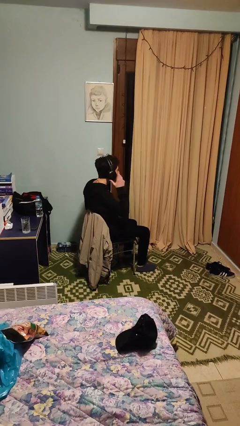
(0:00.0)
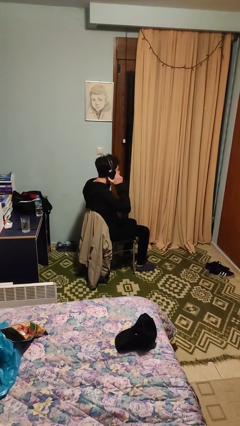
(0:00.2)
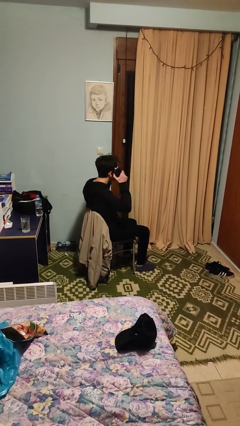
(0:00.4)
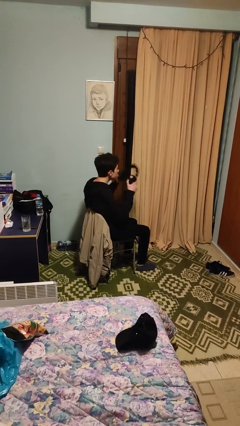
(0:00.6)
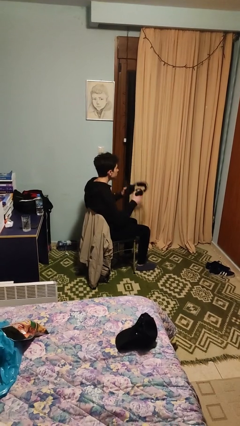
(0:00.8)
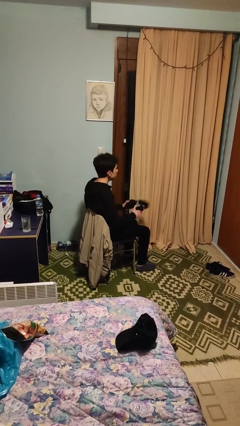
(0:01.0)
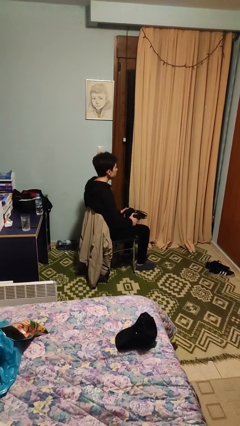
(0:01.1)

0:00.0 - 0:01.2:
person takes off headphones

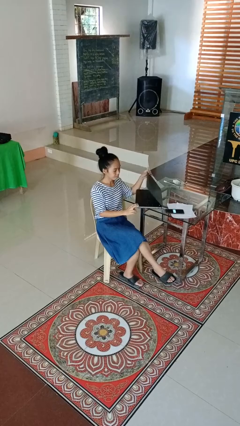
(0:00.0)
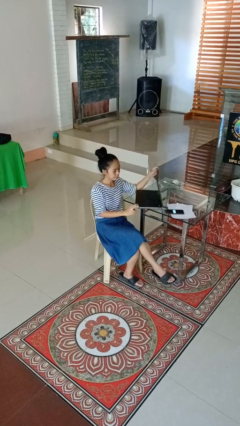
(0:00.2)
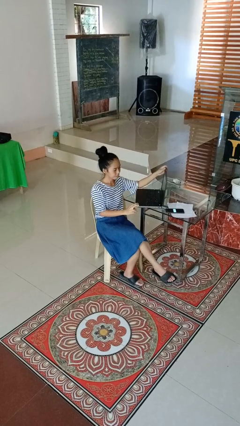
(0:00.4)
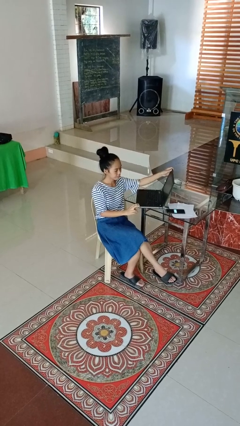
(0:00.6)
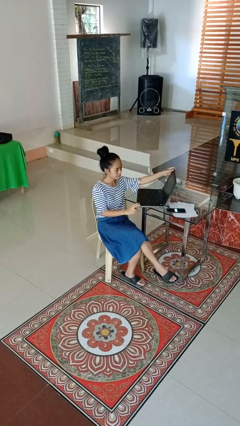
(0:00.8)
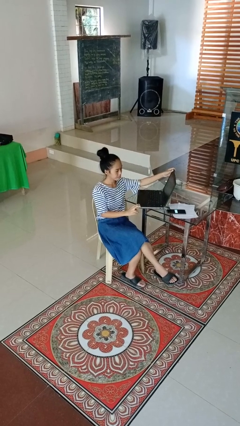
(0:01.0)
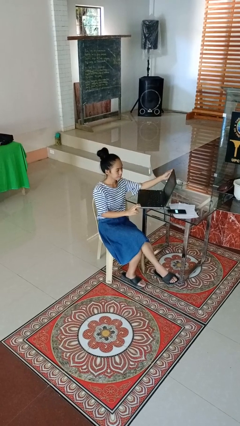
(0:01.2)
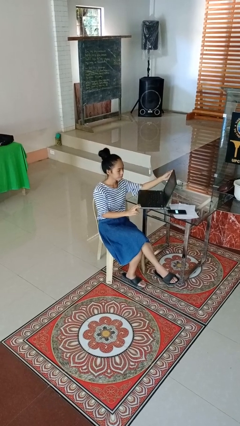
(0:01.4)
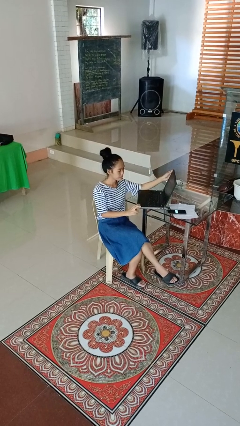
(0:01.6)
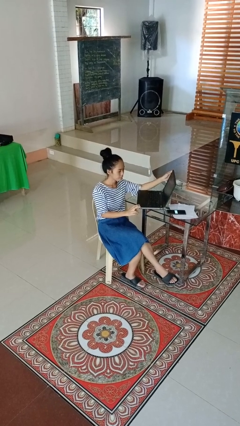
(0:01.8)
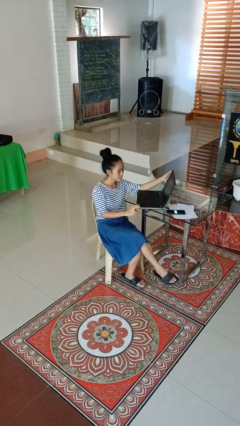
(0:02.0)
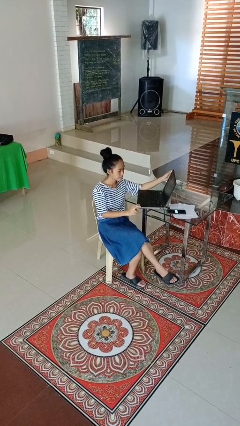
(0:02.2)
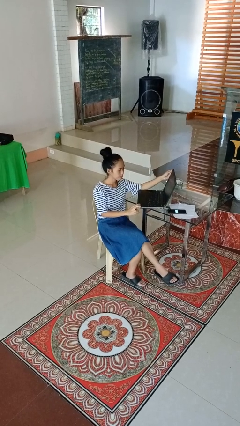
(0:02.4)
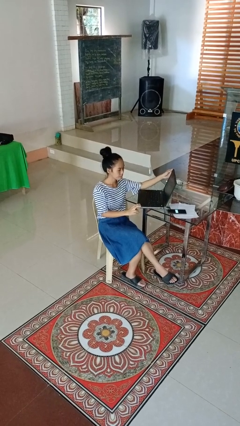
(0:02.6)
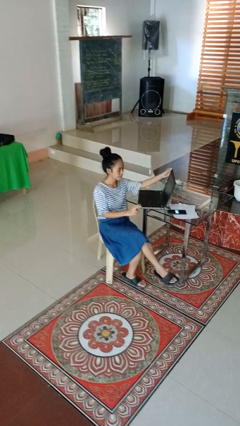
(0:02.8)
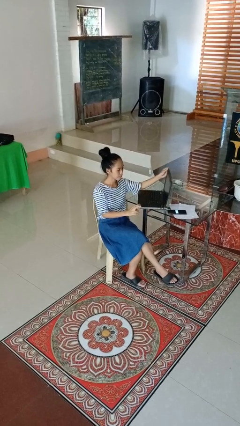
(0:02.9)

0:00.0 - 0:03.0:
person opens laptop

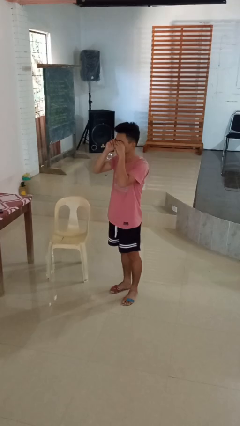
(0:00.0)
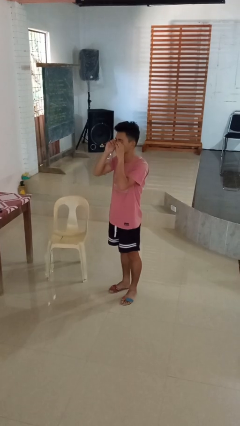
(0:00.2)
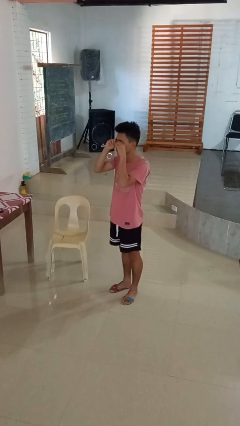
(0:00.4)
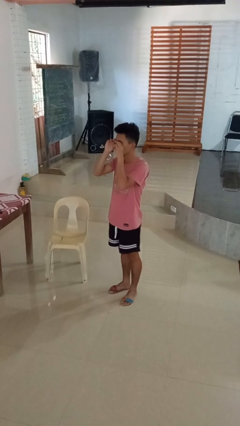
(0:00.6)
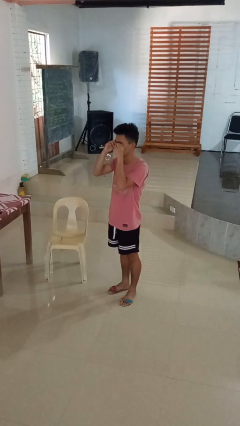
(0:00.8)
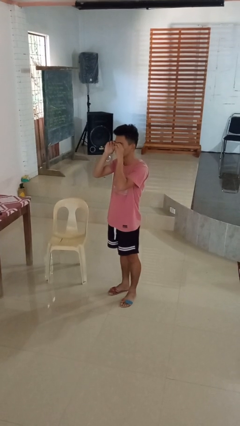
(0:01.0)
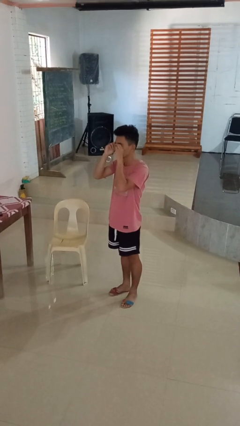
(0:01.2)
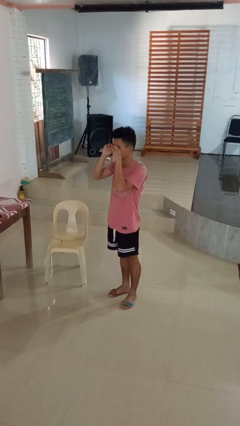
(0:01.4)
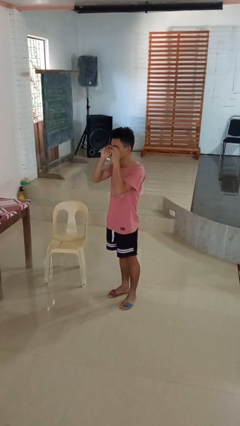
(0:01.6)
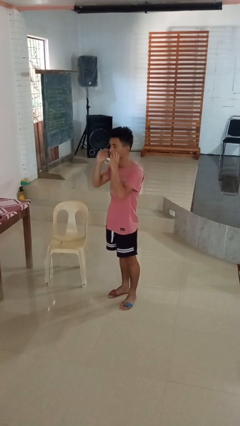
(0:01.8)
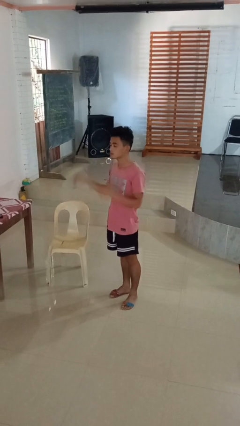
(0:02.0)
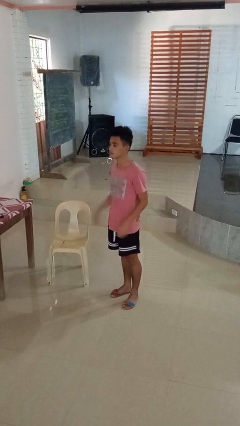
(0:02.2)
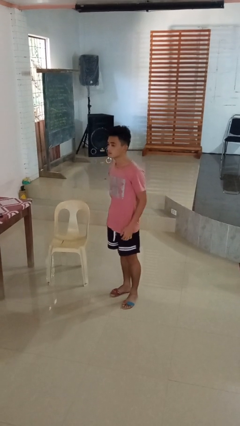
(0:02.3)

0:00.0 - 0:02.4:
person rubs eyes

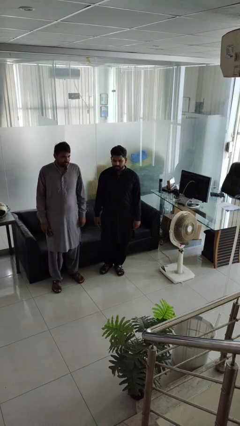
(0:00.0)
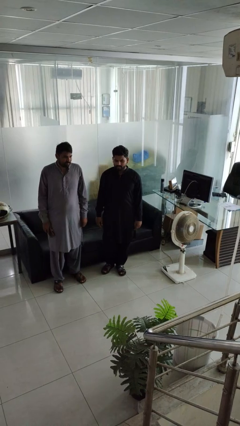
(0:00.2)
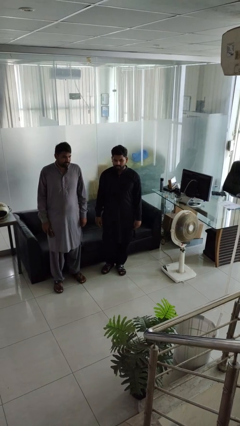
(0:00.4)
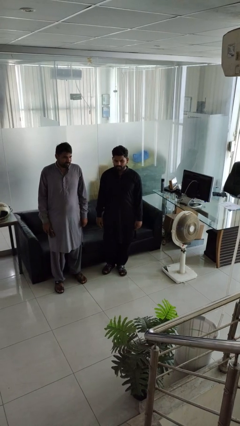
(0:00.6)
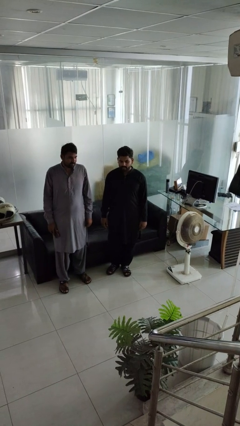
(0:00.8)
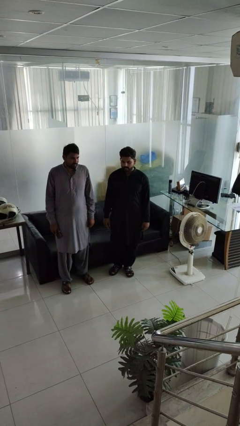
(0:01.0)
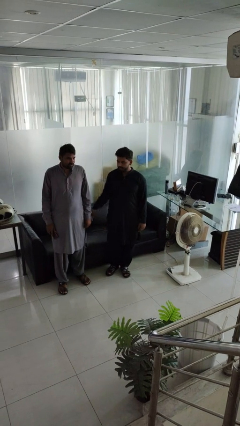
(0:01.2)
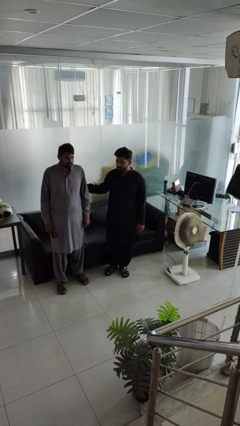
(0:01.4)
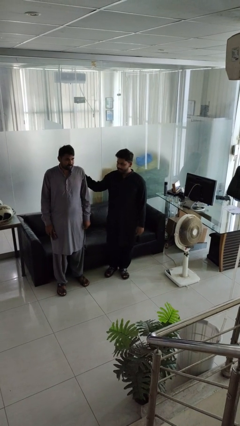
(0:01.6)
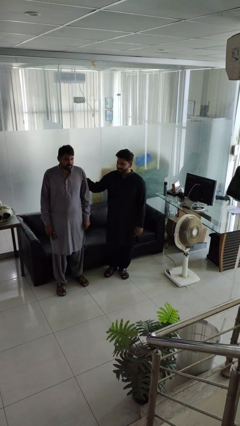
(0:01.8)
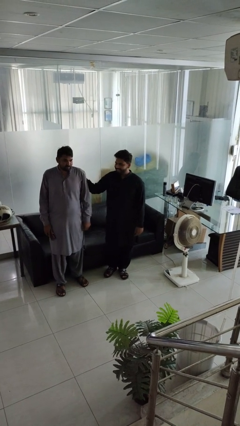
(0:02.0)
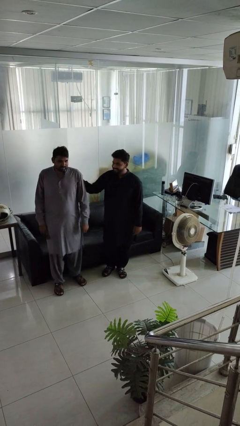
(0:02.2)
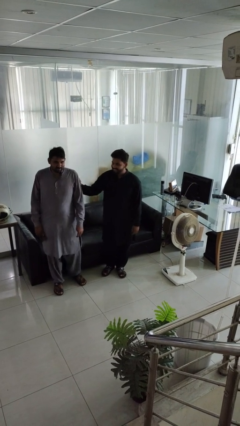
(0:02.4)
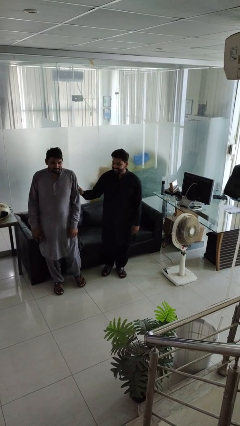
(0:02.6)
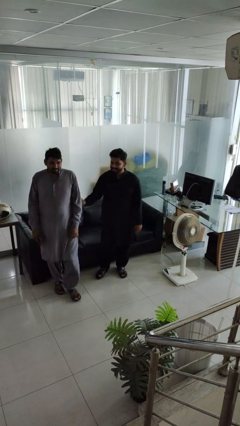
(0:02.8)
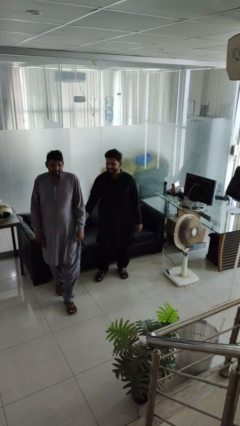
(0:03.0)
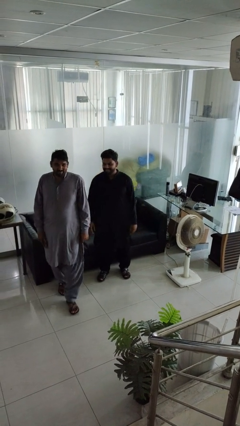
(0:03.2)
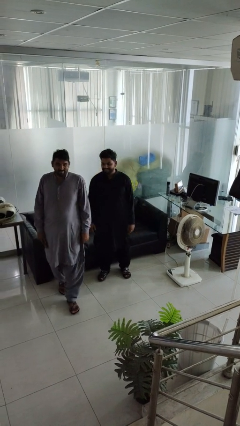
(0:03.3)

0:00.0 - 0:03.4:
person shoves person

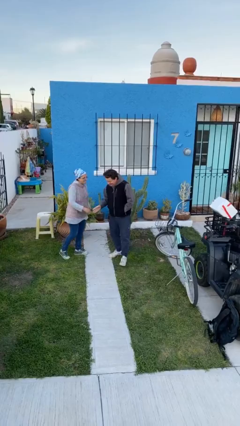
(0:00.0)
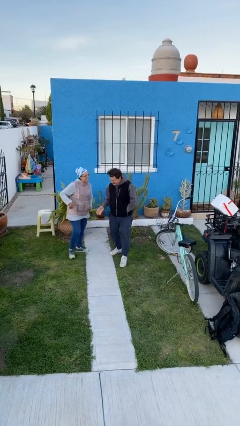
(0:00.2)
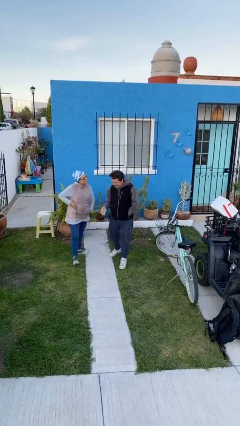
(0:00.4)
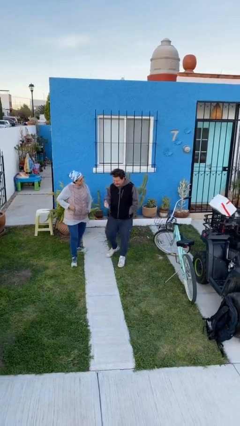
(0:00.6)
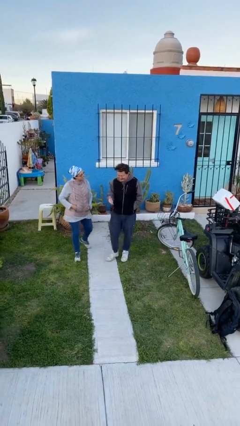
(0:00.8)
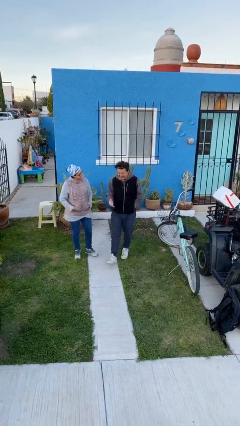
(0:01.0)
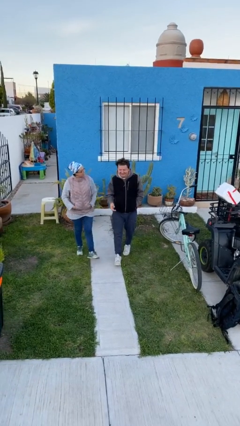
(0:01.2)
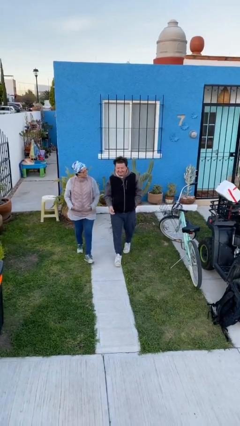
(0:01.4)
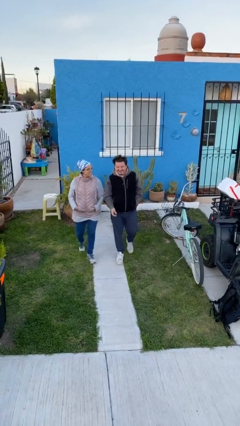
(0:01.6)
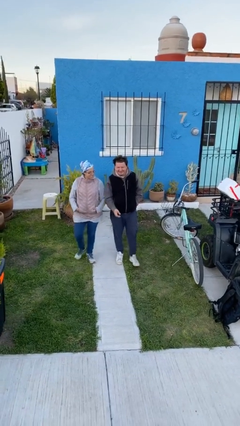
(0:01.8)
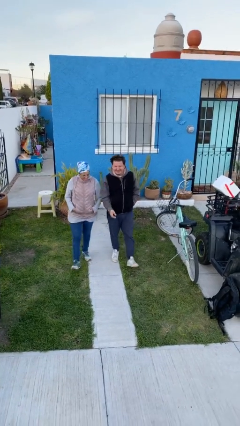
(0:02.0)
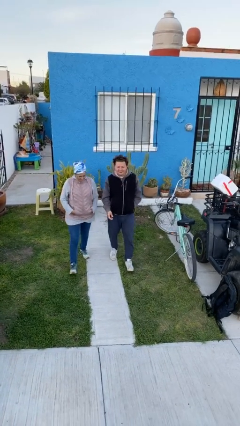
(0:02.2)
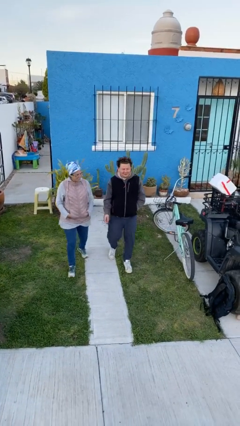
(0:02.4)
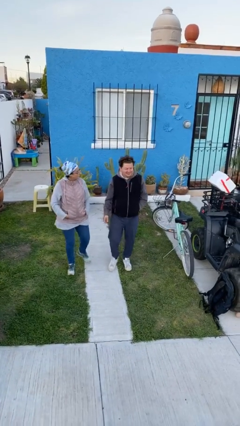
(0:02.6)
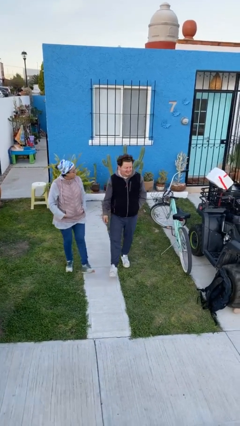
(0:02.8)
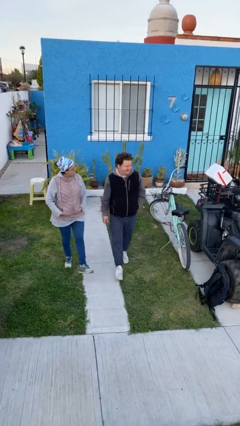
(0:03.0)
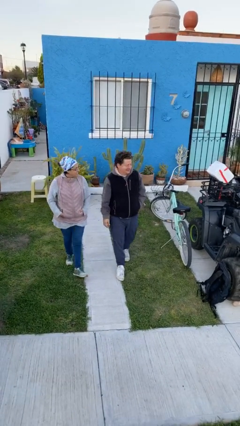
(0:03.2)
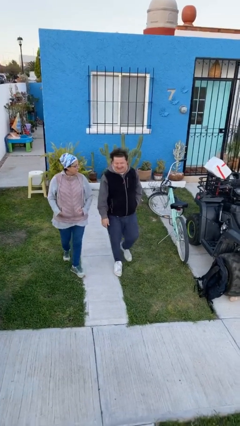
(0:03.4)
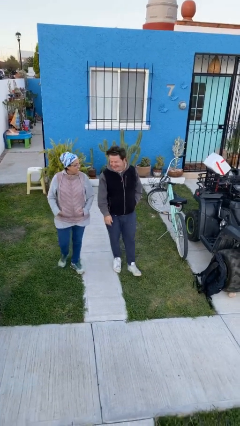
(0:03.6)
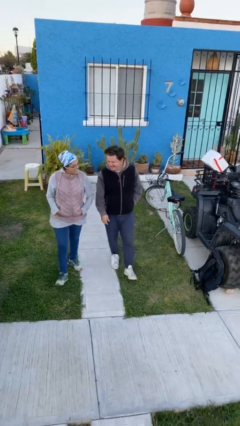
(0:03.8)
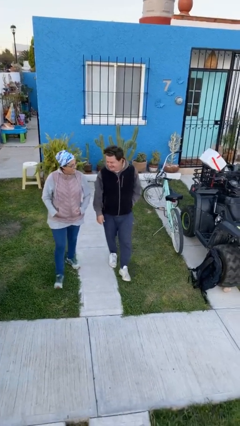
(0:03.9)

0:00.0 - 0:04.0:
person talks to person

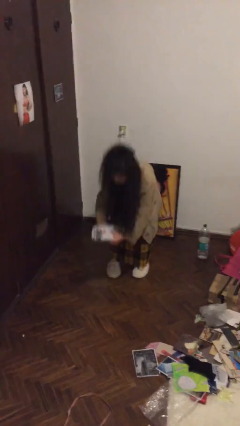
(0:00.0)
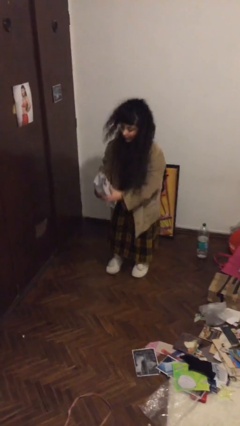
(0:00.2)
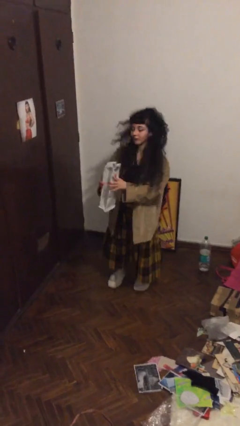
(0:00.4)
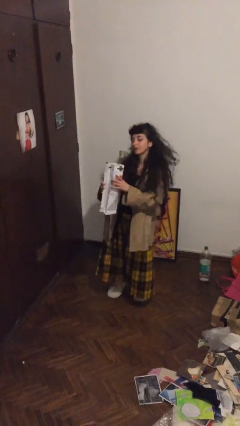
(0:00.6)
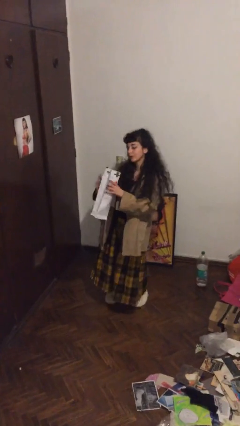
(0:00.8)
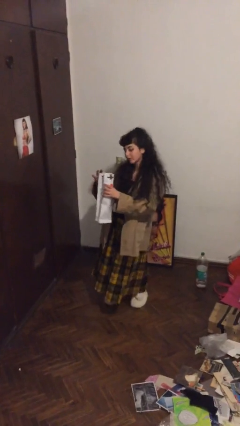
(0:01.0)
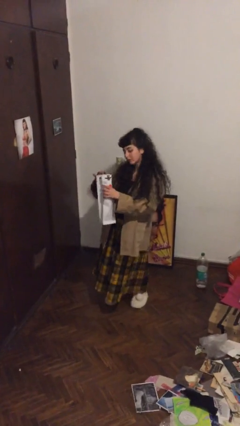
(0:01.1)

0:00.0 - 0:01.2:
person picks up object from floor

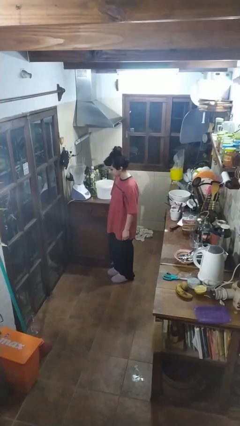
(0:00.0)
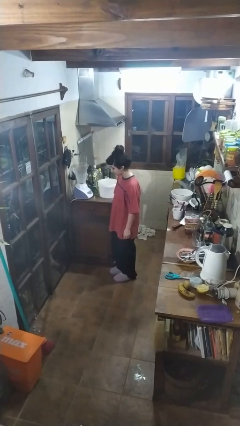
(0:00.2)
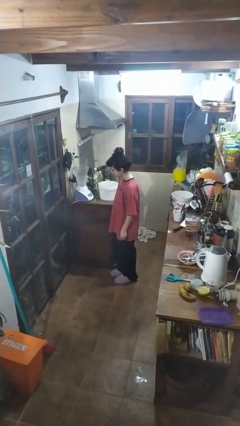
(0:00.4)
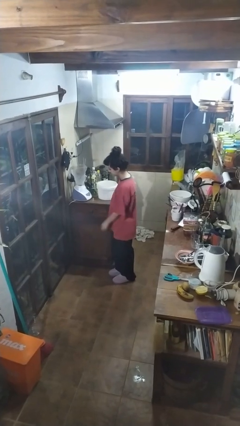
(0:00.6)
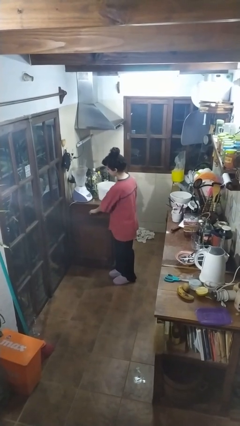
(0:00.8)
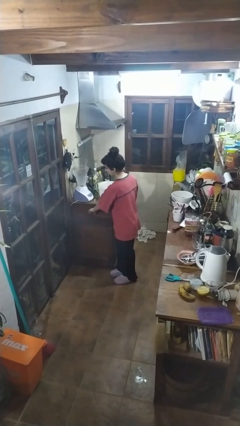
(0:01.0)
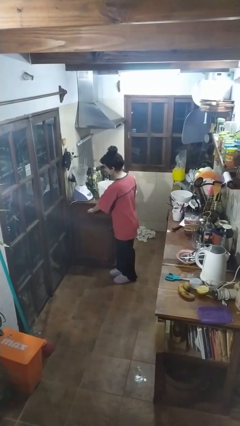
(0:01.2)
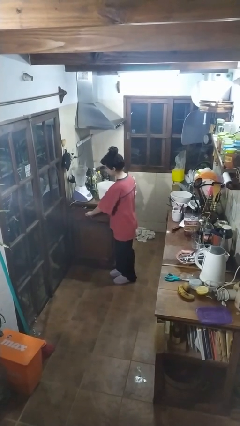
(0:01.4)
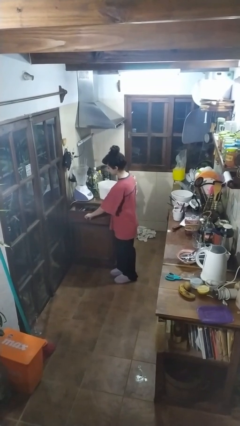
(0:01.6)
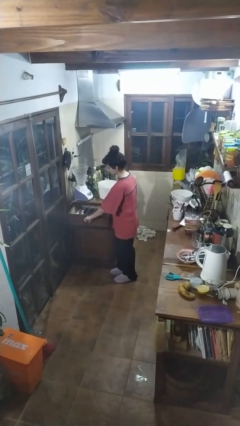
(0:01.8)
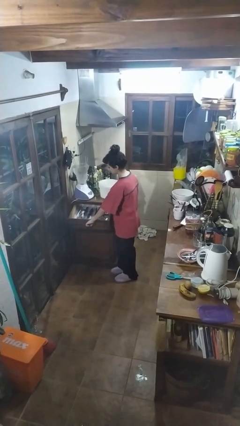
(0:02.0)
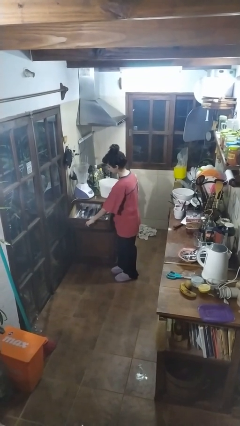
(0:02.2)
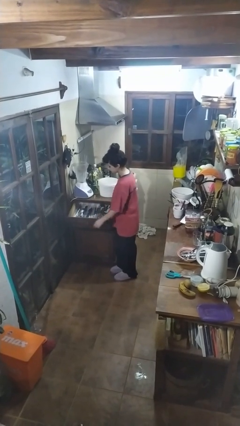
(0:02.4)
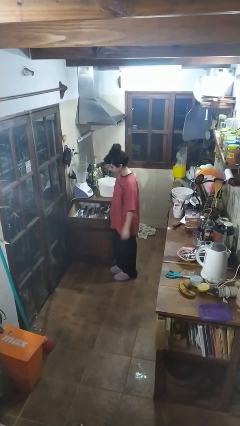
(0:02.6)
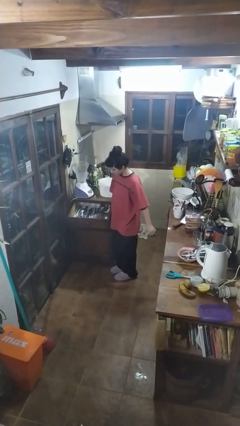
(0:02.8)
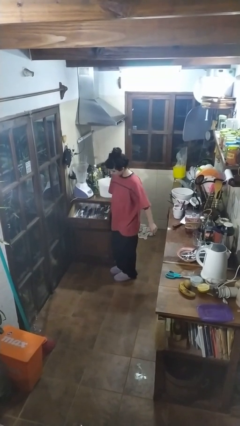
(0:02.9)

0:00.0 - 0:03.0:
person opens kitchen drawer
